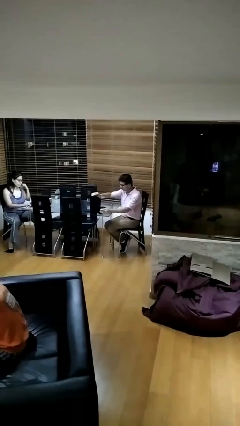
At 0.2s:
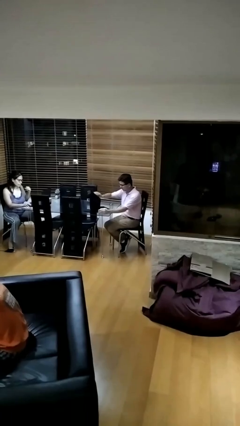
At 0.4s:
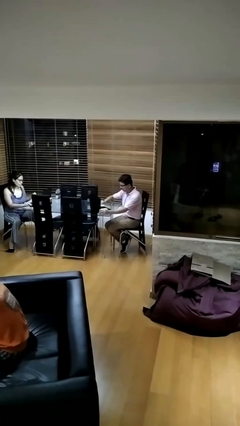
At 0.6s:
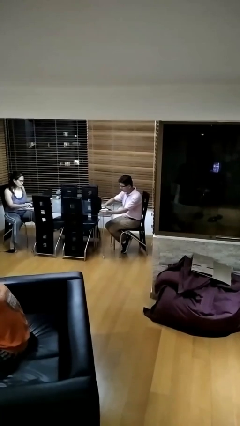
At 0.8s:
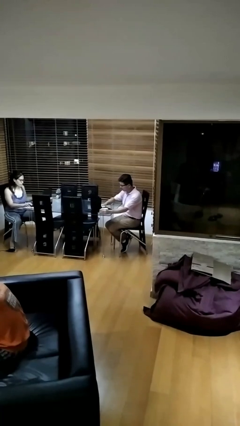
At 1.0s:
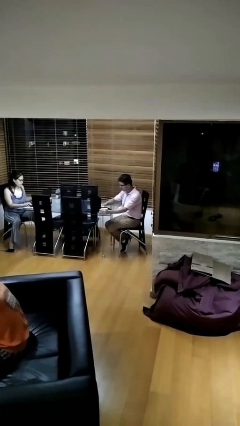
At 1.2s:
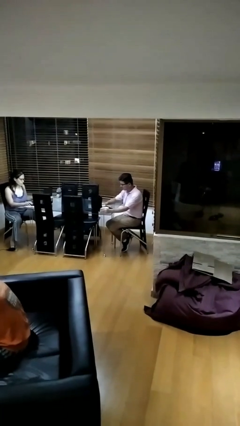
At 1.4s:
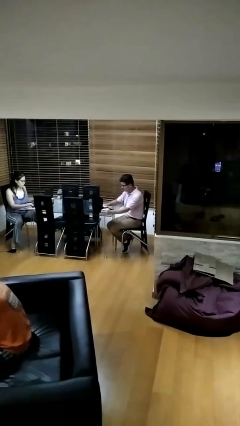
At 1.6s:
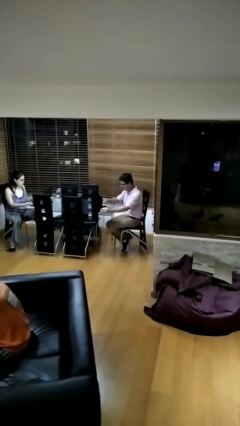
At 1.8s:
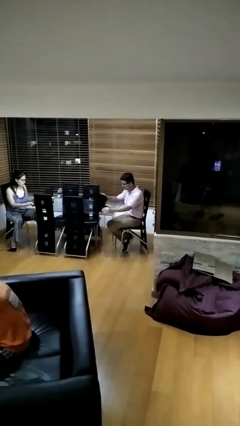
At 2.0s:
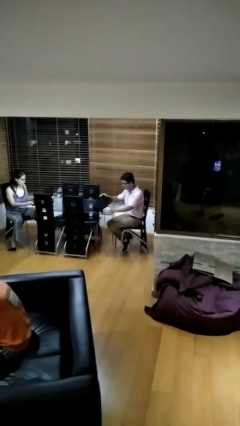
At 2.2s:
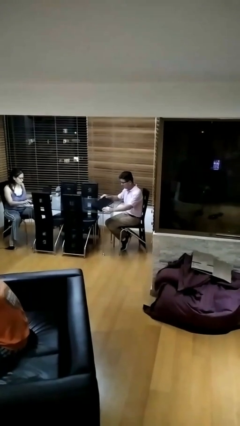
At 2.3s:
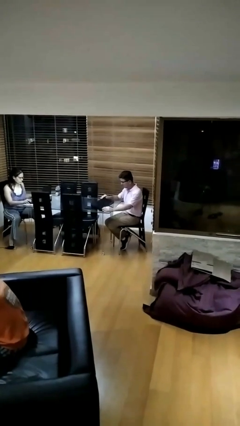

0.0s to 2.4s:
person interacts with laptop

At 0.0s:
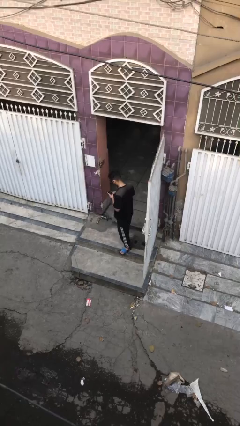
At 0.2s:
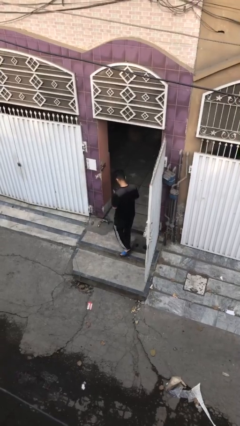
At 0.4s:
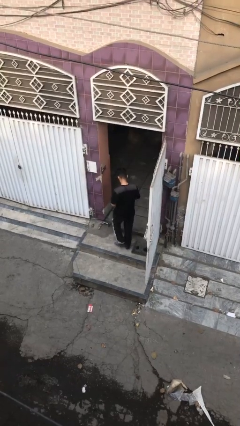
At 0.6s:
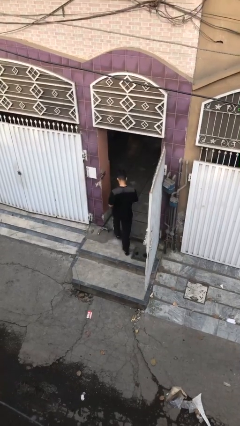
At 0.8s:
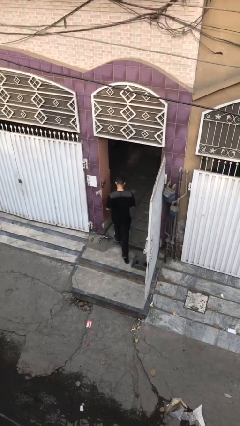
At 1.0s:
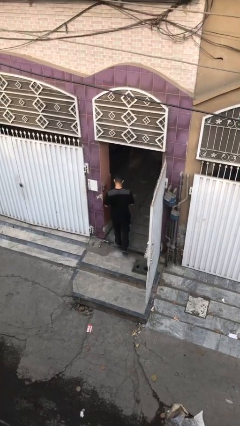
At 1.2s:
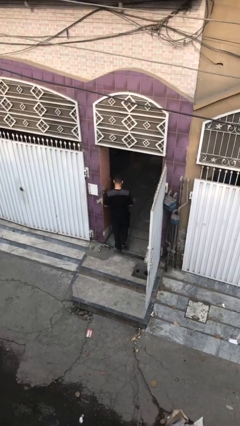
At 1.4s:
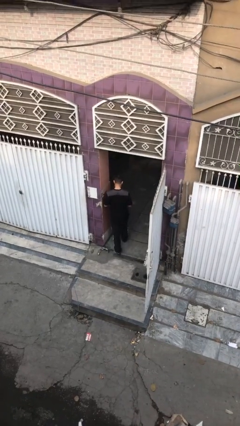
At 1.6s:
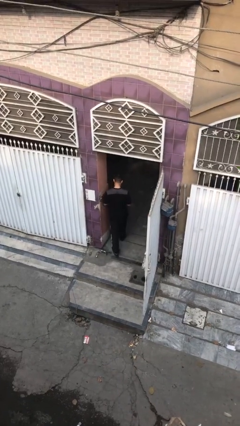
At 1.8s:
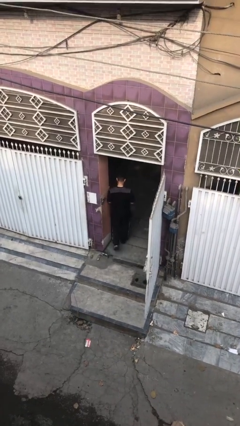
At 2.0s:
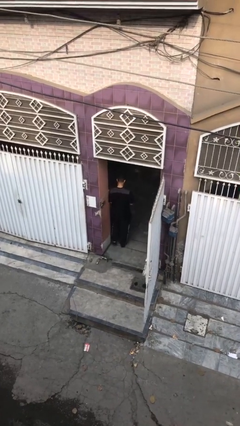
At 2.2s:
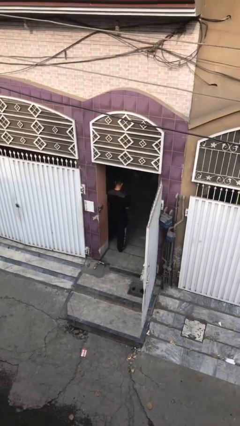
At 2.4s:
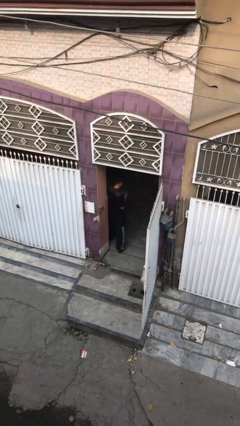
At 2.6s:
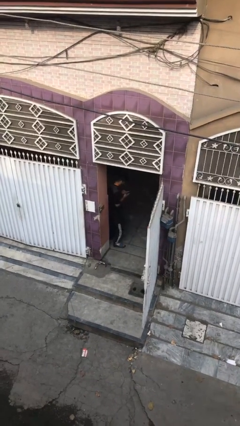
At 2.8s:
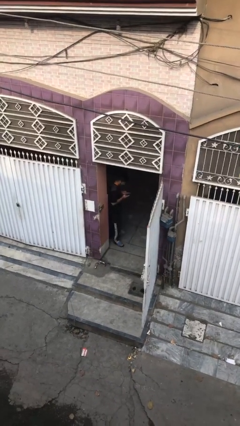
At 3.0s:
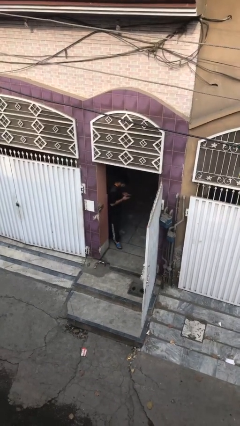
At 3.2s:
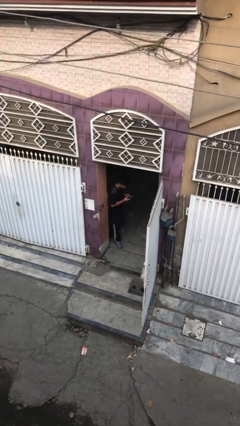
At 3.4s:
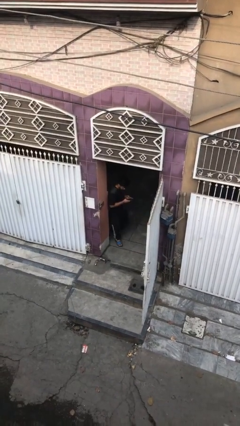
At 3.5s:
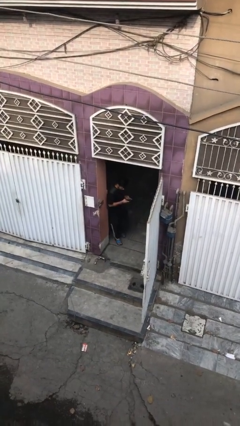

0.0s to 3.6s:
person exits scene through structure

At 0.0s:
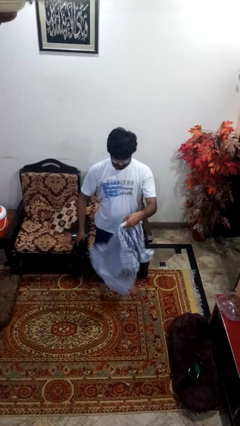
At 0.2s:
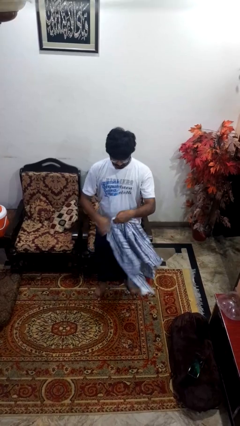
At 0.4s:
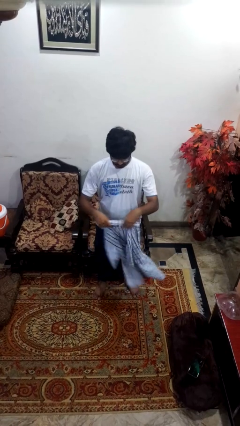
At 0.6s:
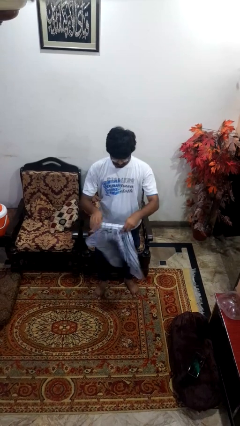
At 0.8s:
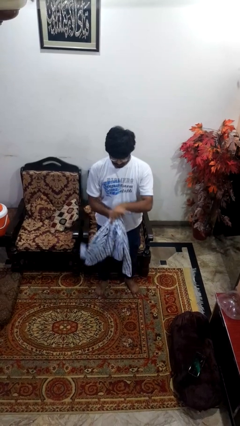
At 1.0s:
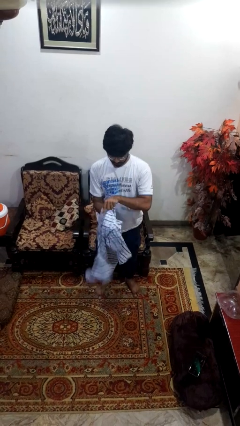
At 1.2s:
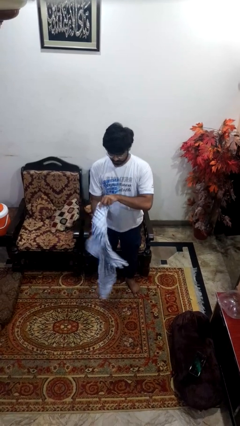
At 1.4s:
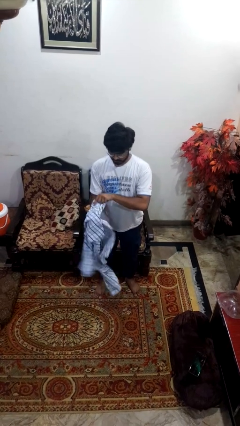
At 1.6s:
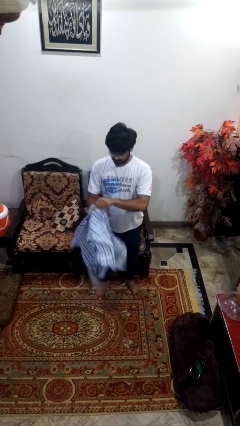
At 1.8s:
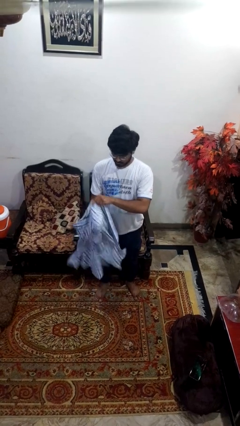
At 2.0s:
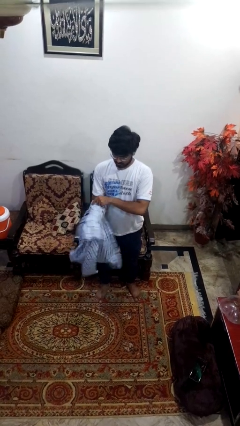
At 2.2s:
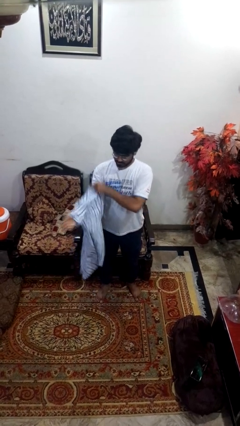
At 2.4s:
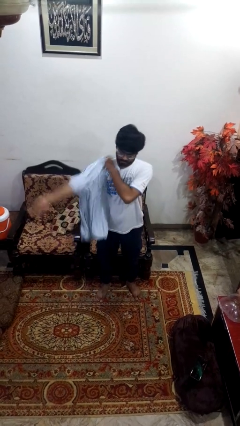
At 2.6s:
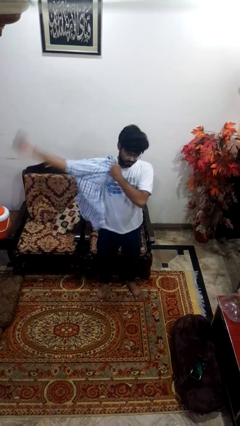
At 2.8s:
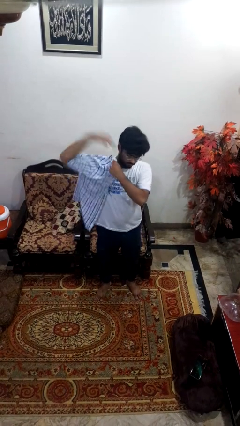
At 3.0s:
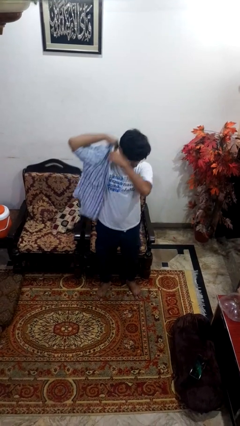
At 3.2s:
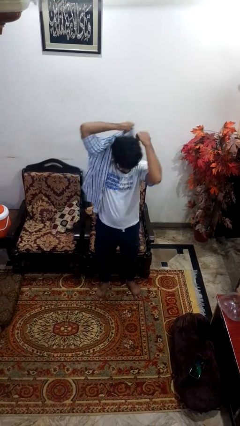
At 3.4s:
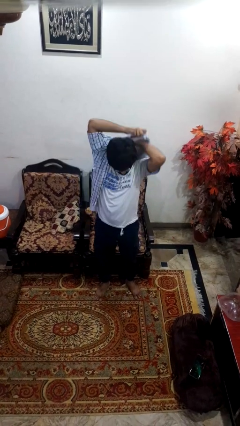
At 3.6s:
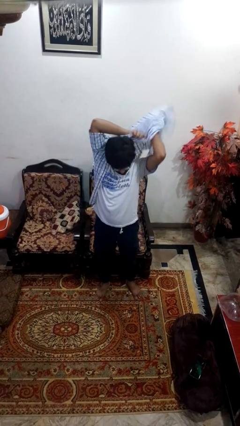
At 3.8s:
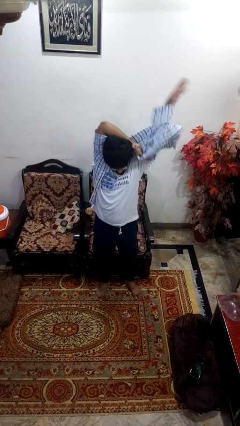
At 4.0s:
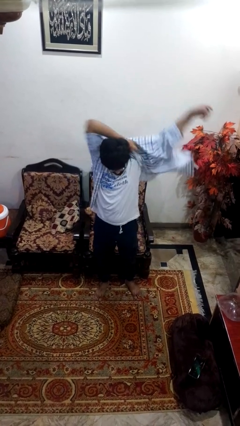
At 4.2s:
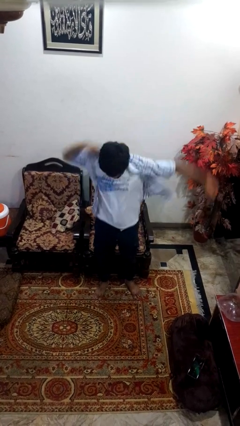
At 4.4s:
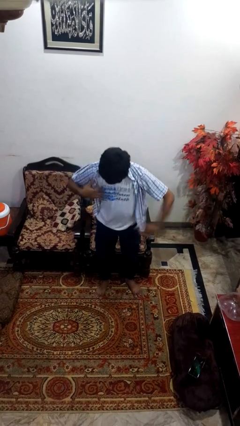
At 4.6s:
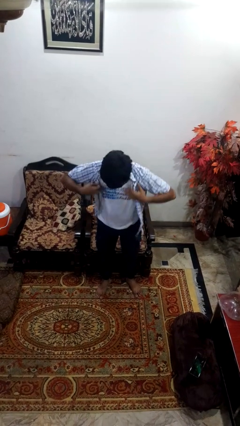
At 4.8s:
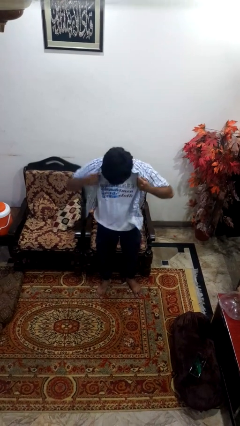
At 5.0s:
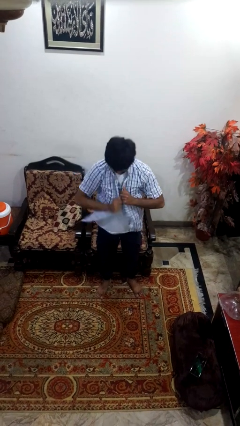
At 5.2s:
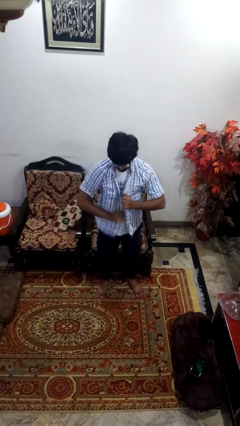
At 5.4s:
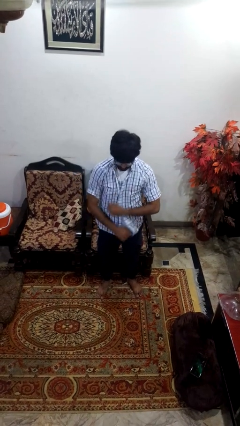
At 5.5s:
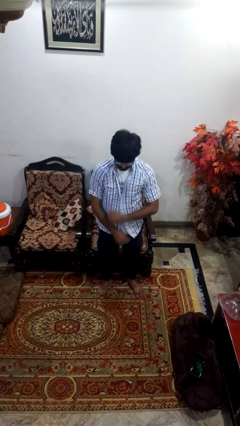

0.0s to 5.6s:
person puts on shirt

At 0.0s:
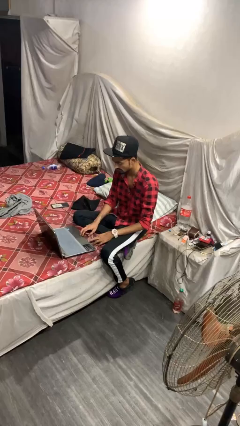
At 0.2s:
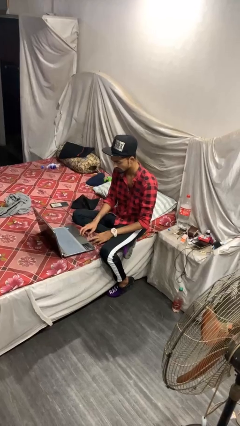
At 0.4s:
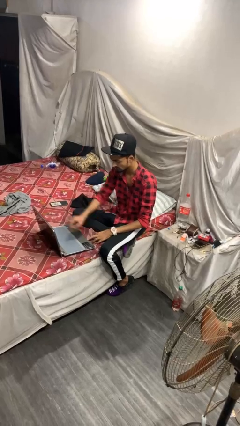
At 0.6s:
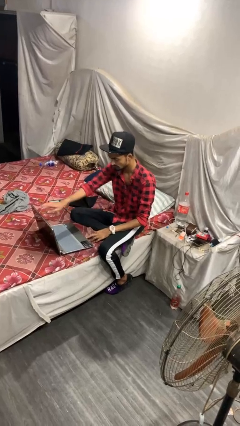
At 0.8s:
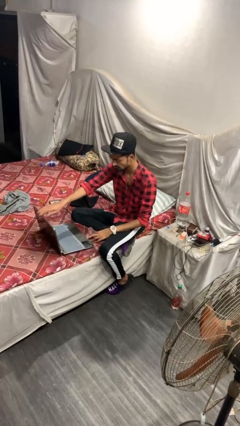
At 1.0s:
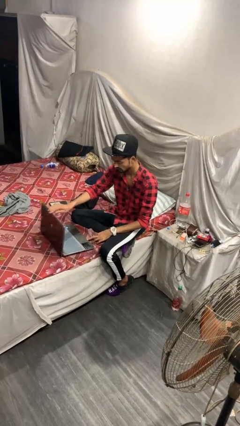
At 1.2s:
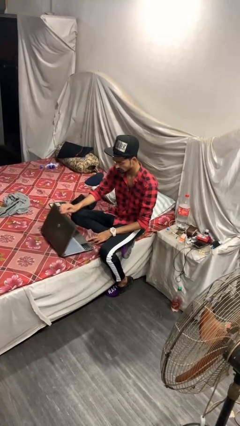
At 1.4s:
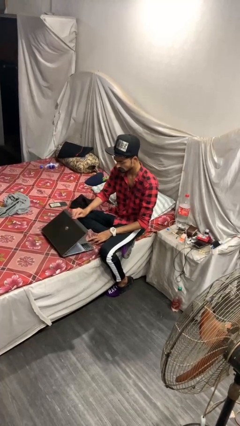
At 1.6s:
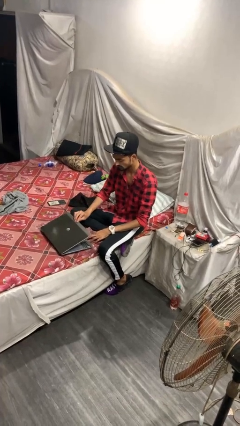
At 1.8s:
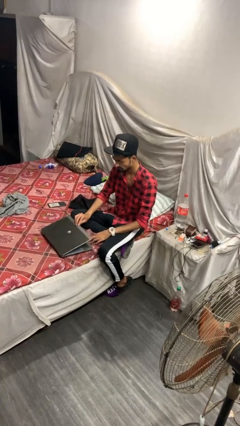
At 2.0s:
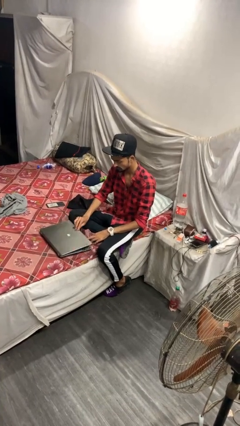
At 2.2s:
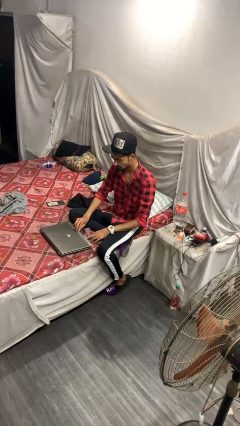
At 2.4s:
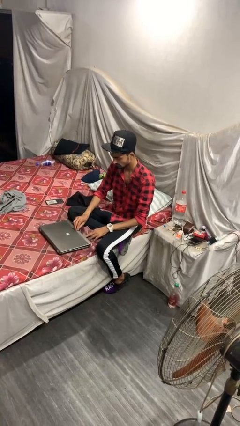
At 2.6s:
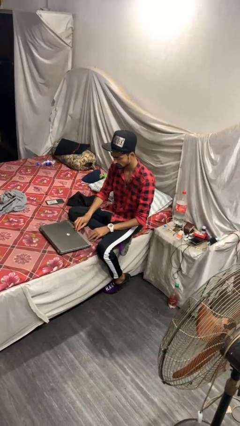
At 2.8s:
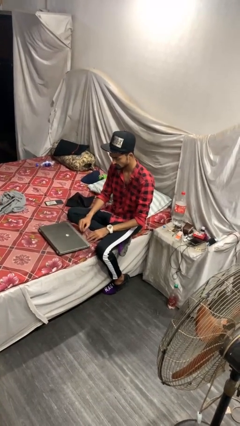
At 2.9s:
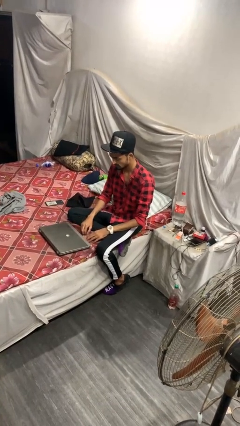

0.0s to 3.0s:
person closes laptop

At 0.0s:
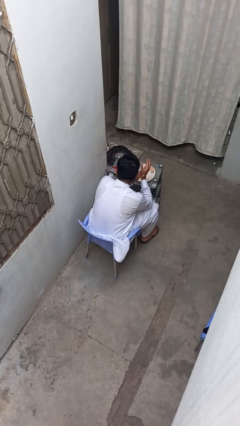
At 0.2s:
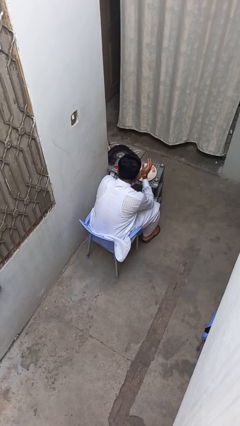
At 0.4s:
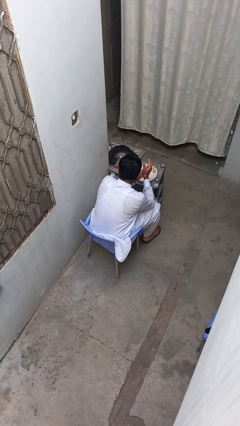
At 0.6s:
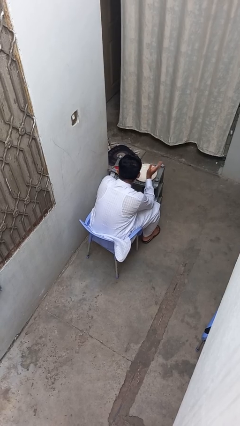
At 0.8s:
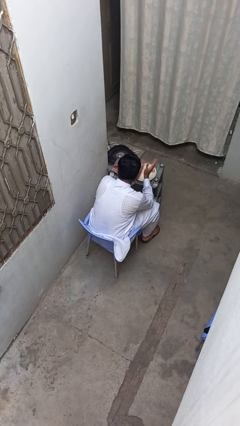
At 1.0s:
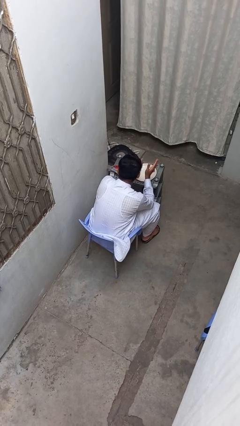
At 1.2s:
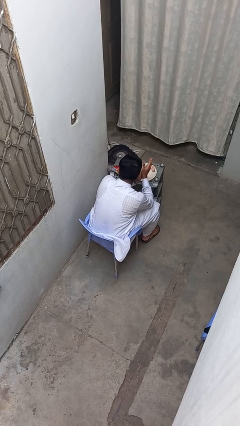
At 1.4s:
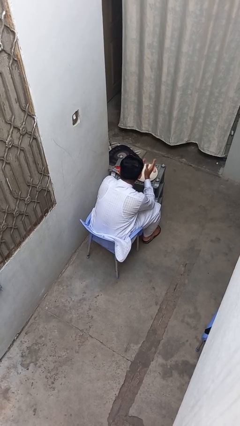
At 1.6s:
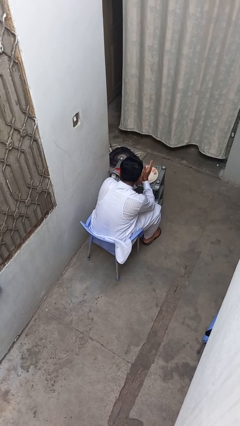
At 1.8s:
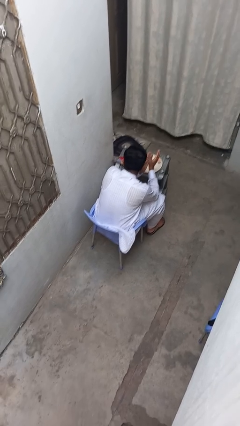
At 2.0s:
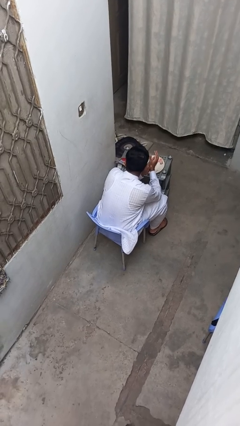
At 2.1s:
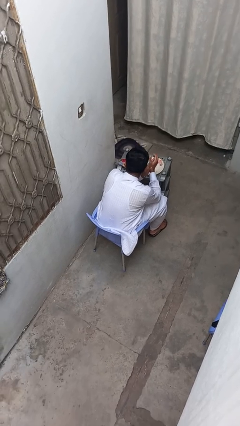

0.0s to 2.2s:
person claps hands

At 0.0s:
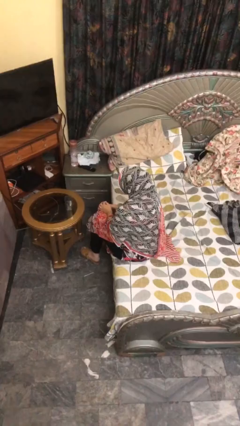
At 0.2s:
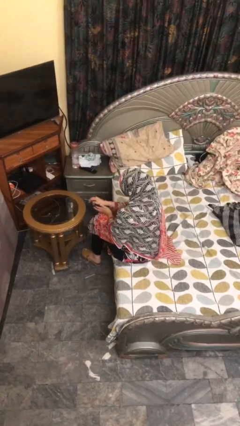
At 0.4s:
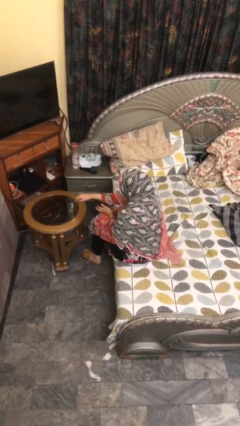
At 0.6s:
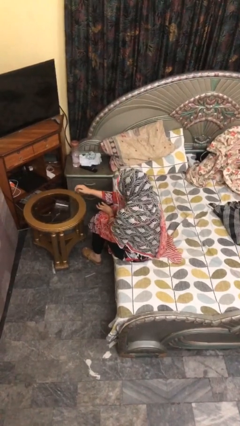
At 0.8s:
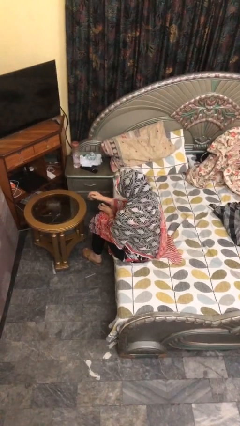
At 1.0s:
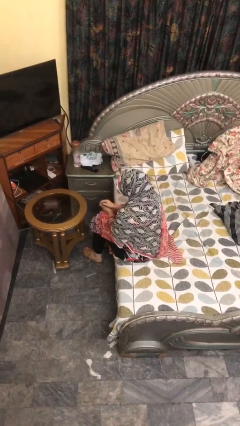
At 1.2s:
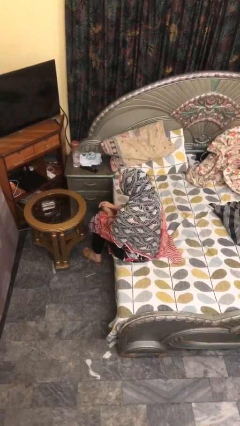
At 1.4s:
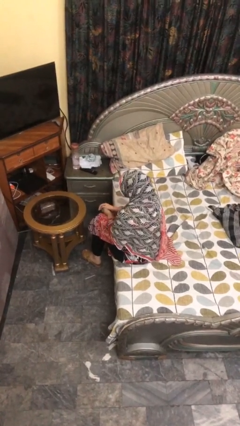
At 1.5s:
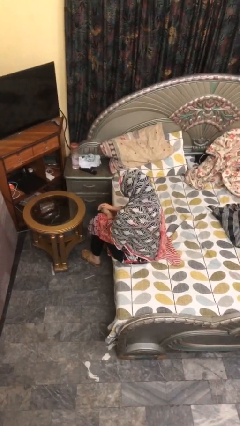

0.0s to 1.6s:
person knocks over glass
